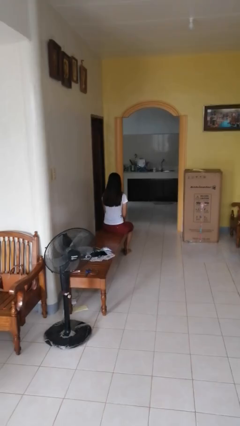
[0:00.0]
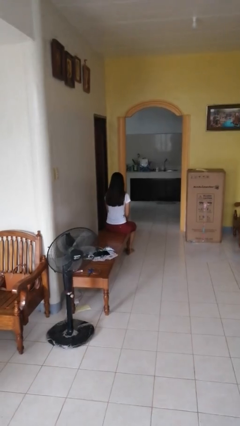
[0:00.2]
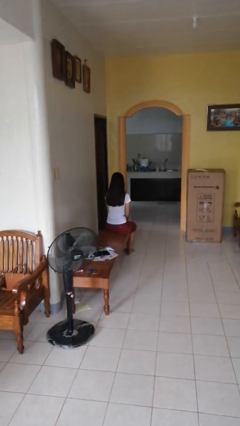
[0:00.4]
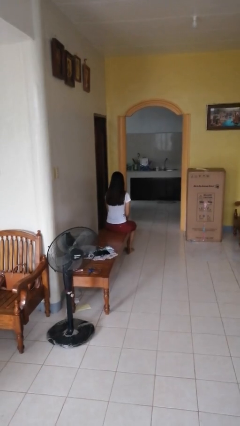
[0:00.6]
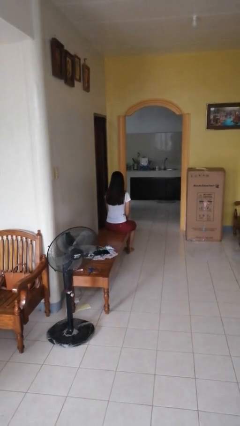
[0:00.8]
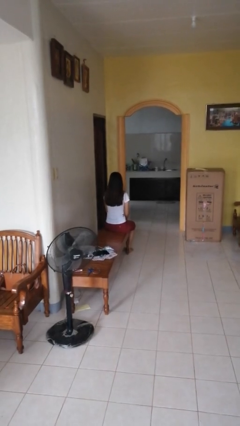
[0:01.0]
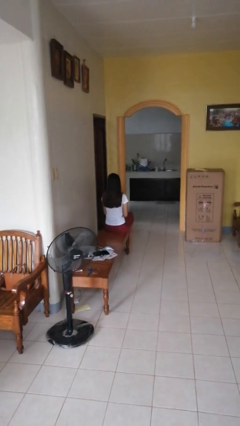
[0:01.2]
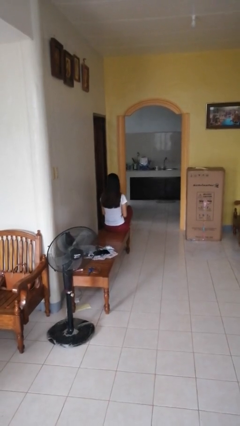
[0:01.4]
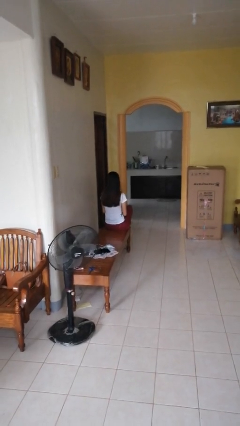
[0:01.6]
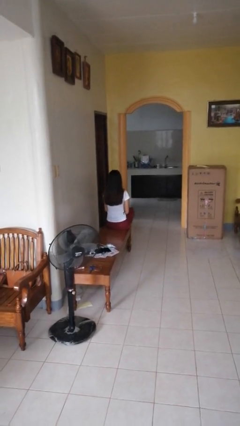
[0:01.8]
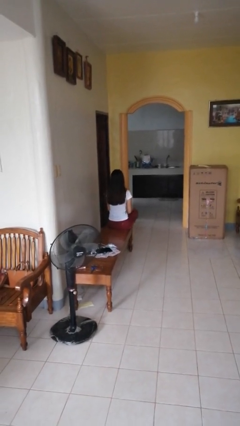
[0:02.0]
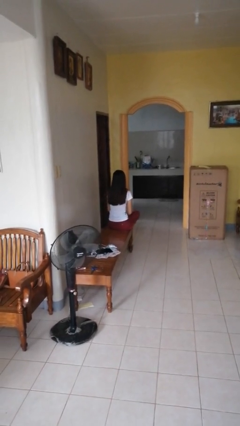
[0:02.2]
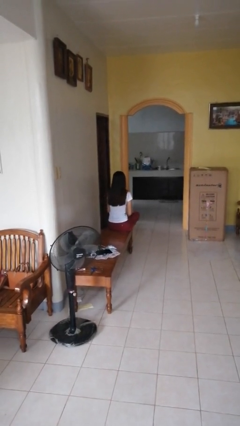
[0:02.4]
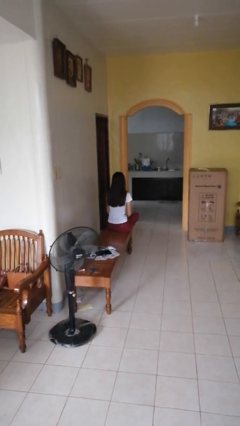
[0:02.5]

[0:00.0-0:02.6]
person crosses legs

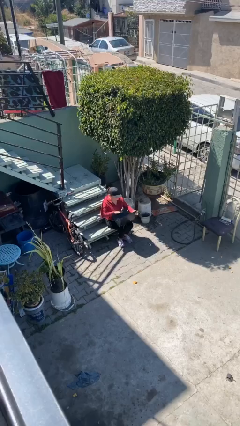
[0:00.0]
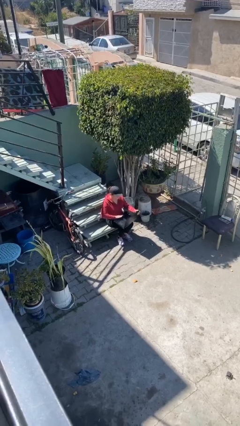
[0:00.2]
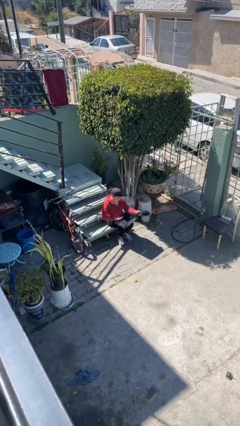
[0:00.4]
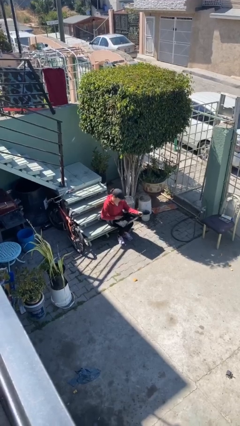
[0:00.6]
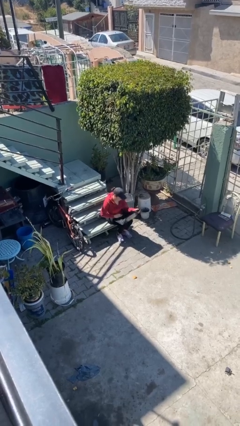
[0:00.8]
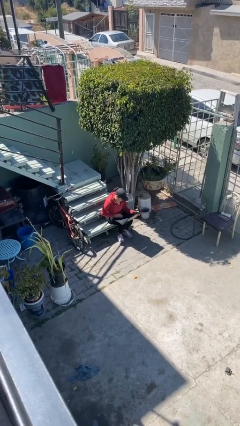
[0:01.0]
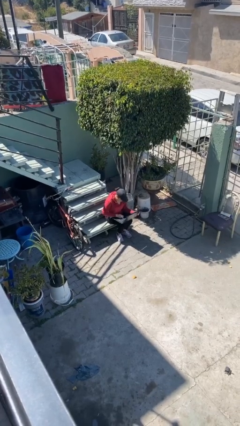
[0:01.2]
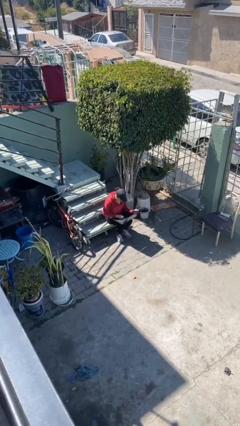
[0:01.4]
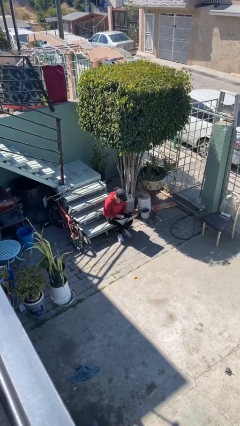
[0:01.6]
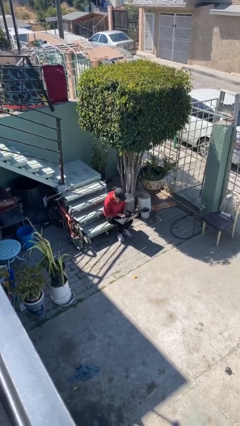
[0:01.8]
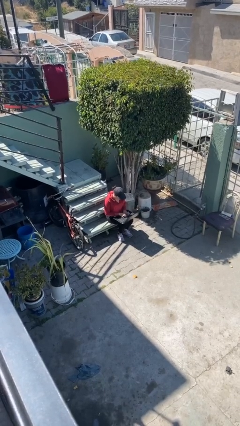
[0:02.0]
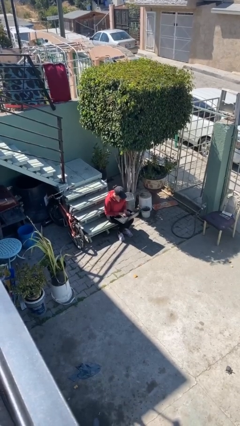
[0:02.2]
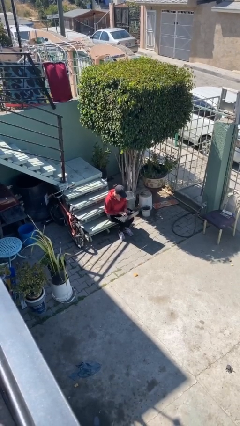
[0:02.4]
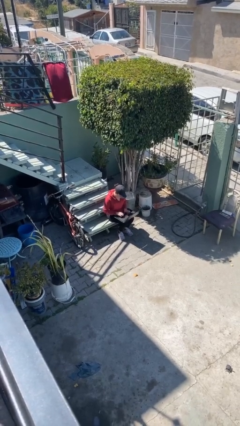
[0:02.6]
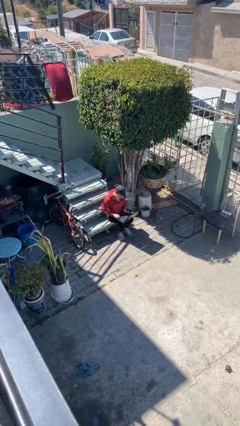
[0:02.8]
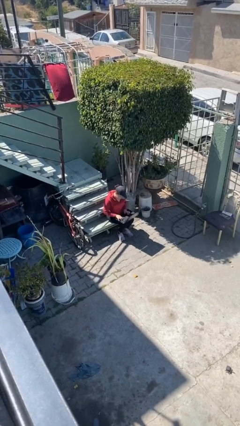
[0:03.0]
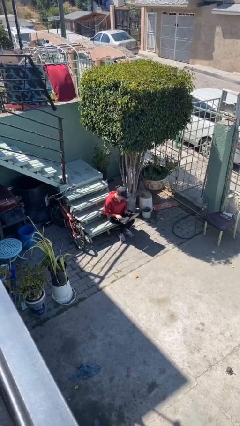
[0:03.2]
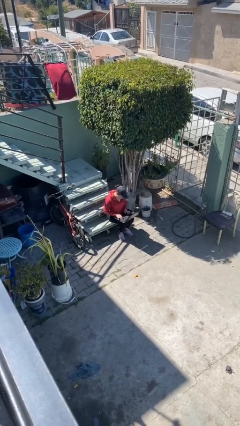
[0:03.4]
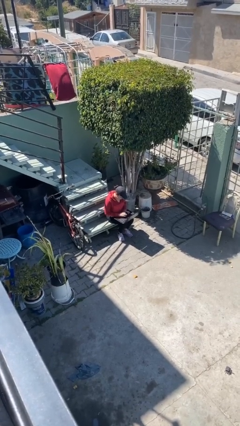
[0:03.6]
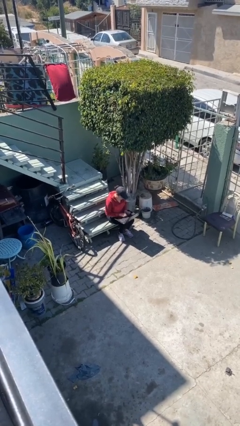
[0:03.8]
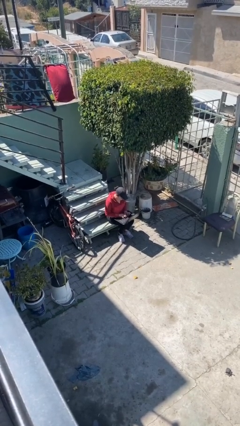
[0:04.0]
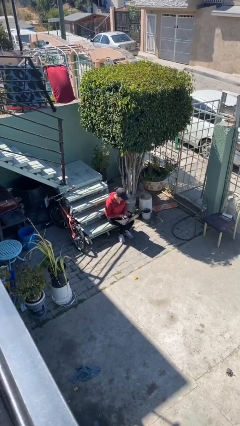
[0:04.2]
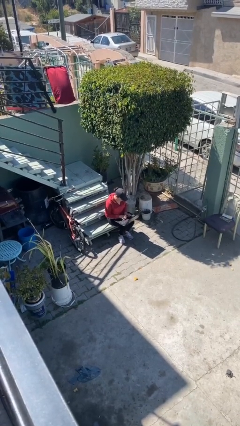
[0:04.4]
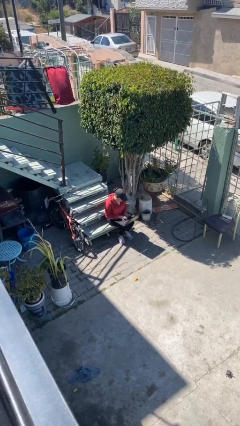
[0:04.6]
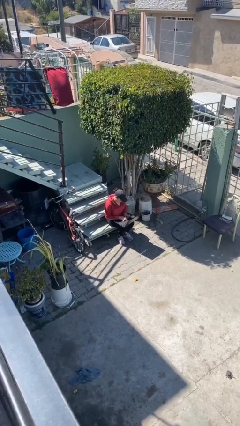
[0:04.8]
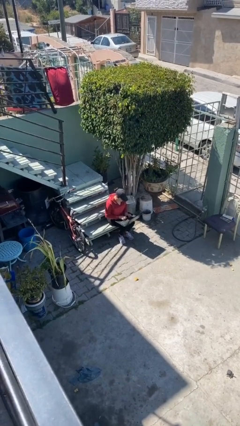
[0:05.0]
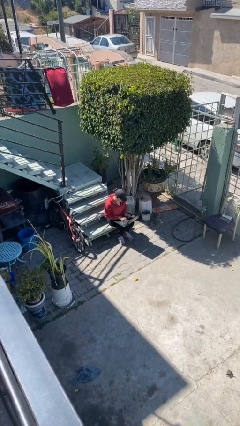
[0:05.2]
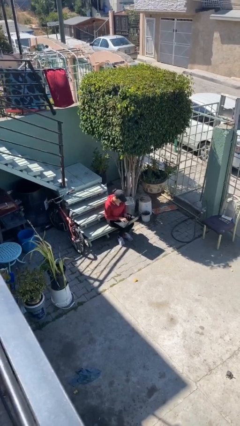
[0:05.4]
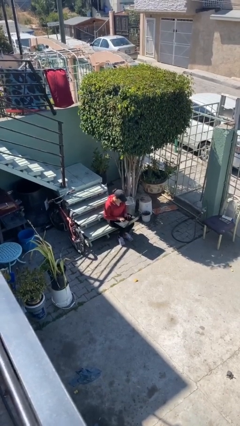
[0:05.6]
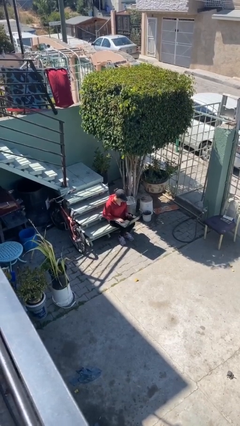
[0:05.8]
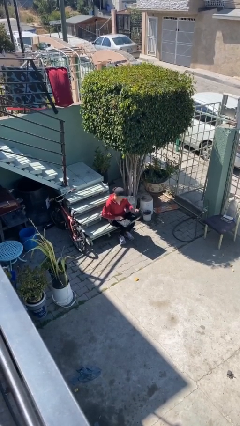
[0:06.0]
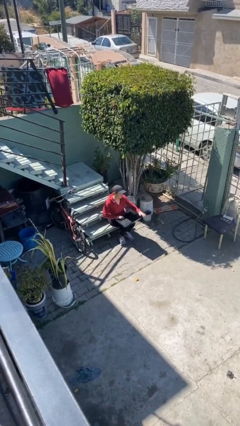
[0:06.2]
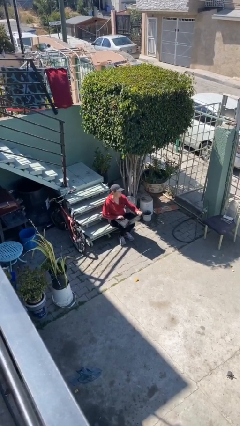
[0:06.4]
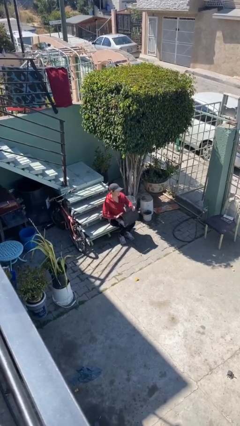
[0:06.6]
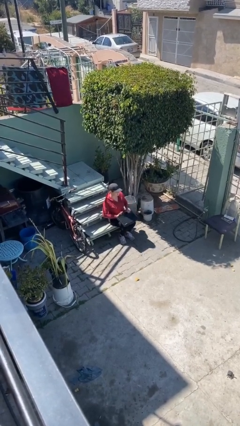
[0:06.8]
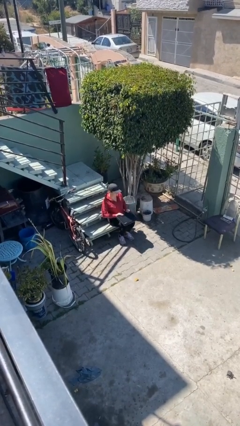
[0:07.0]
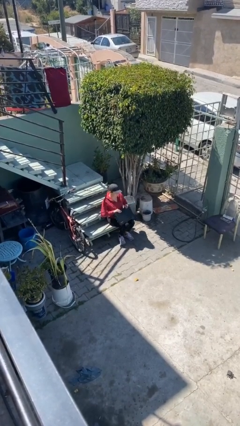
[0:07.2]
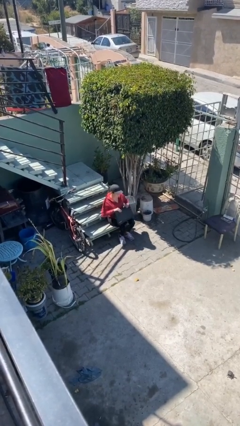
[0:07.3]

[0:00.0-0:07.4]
person interacts with laptop

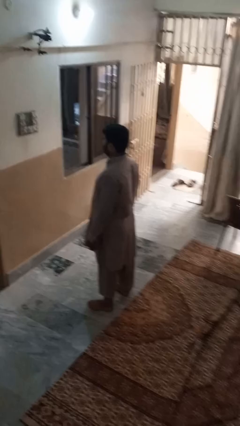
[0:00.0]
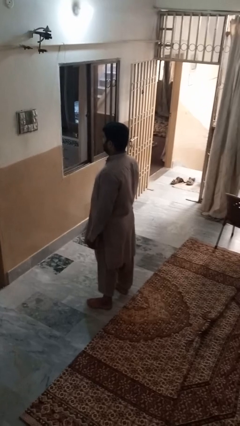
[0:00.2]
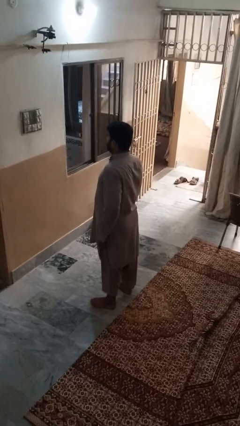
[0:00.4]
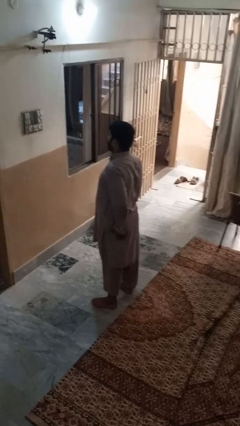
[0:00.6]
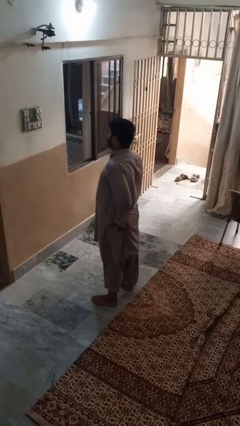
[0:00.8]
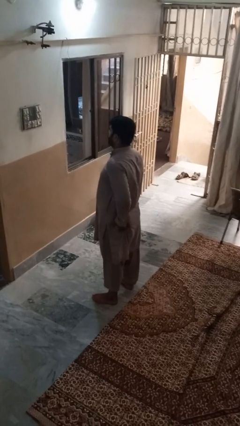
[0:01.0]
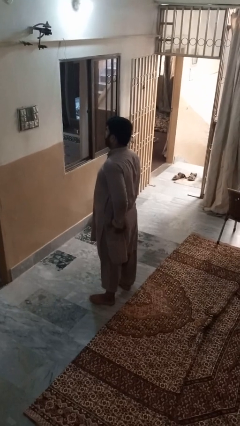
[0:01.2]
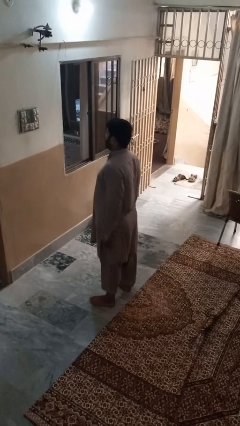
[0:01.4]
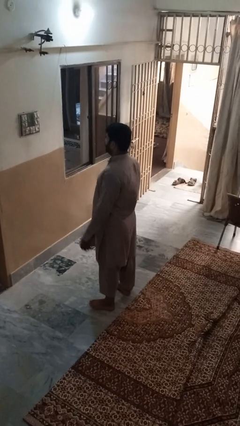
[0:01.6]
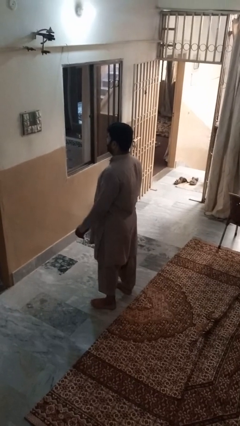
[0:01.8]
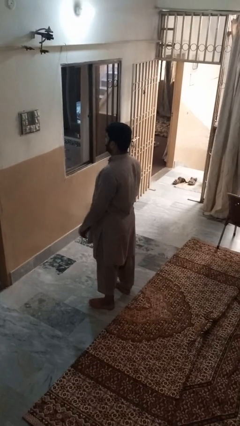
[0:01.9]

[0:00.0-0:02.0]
person wiggles hips

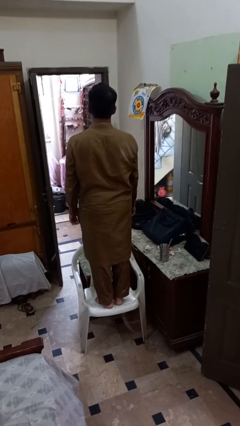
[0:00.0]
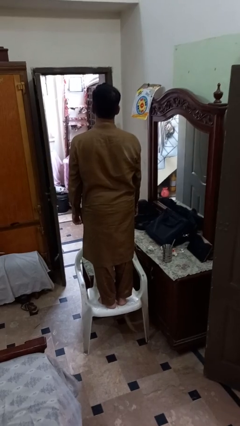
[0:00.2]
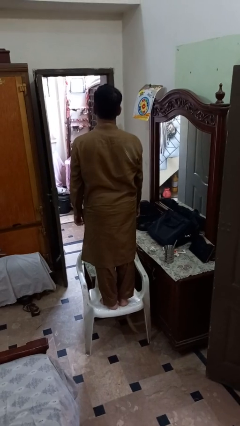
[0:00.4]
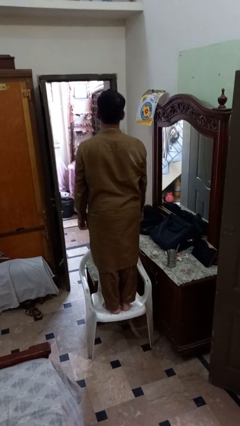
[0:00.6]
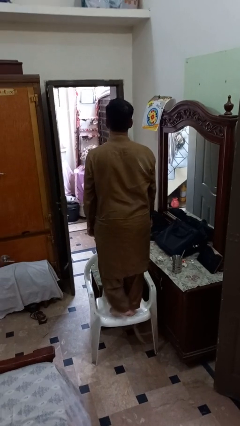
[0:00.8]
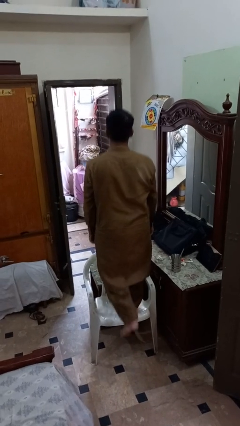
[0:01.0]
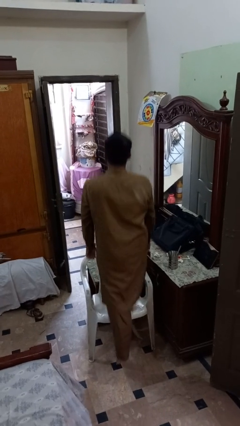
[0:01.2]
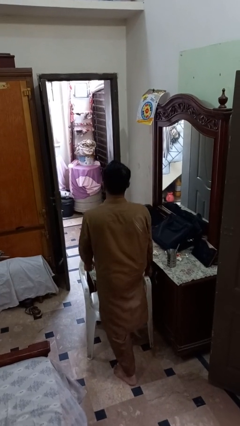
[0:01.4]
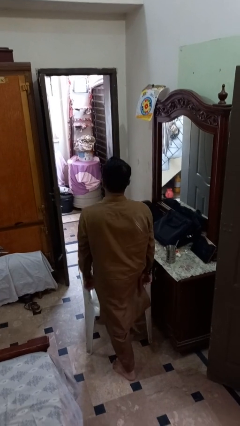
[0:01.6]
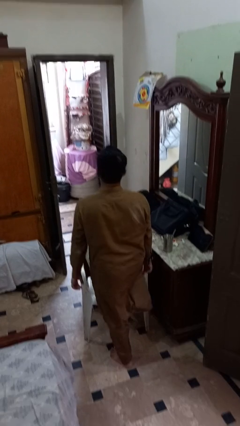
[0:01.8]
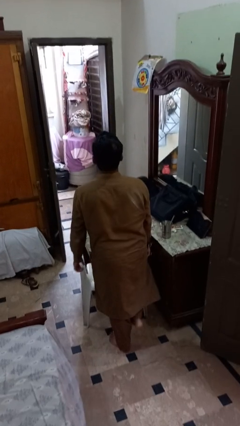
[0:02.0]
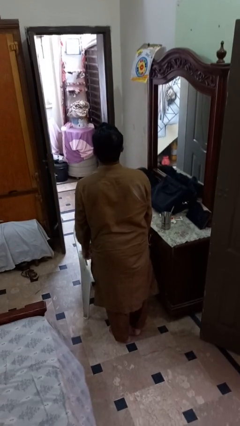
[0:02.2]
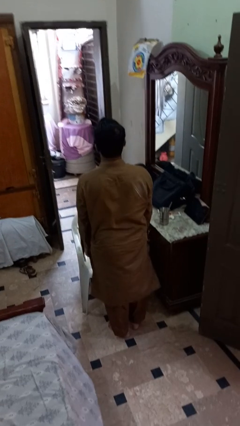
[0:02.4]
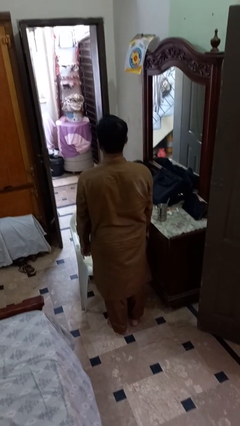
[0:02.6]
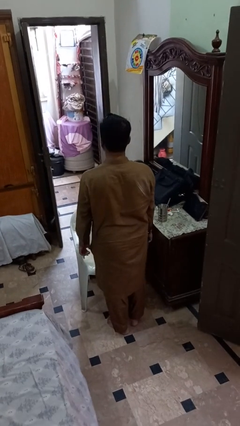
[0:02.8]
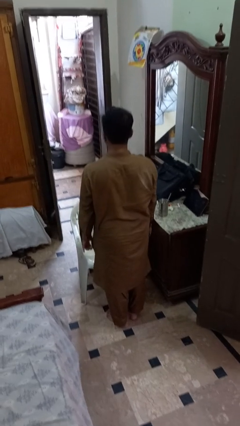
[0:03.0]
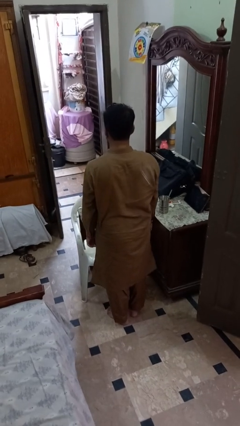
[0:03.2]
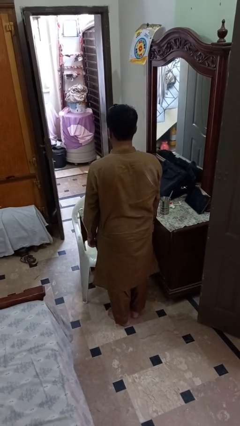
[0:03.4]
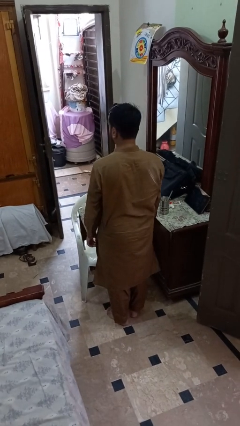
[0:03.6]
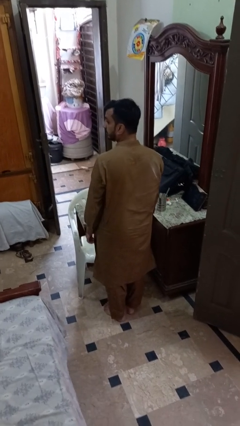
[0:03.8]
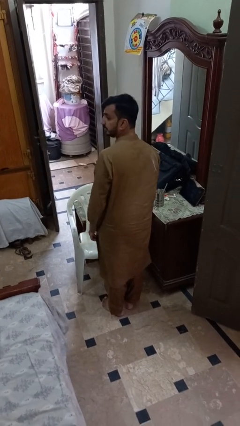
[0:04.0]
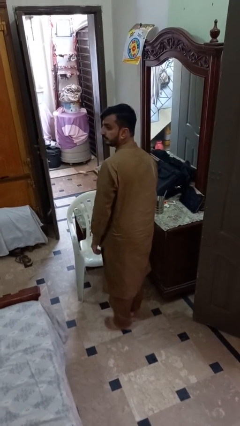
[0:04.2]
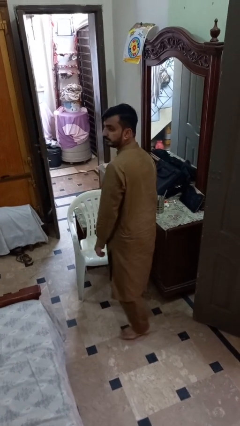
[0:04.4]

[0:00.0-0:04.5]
person climbs off chair

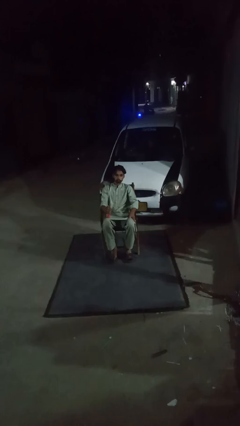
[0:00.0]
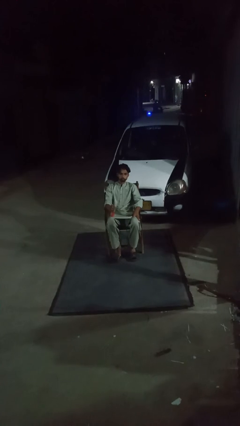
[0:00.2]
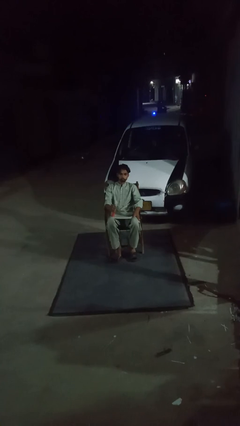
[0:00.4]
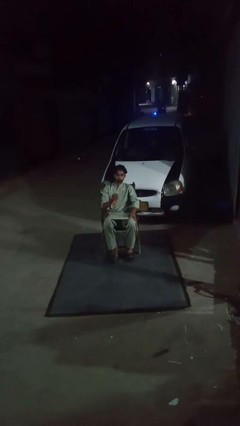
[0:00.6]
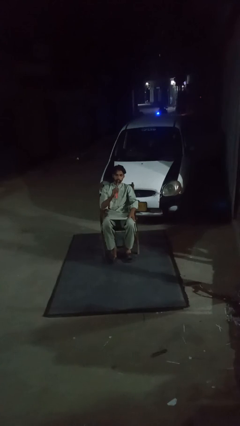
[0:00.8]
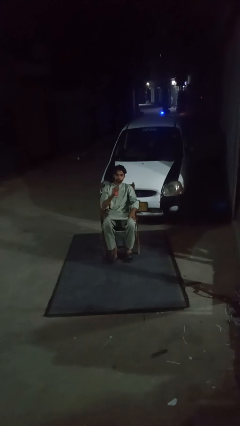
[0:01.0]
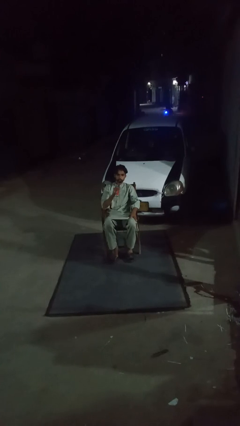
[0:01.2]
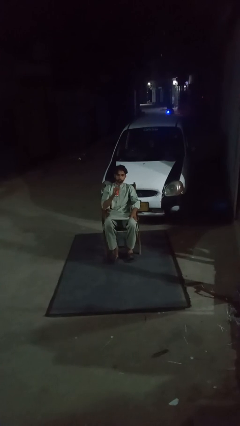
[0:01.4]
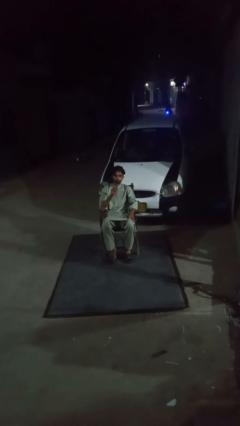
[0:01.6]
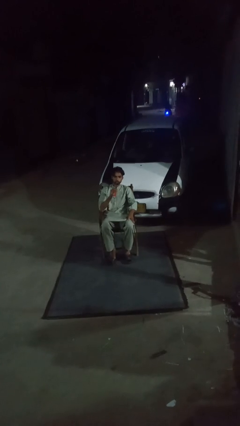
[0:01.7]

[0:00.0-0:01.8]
person drinks from straw
